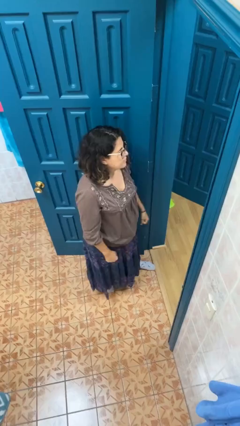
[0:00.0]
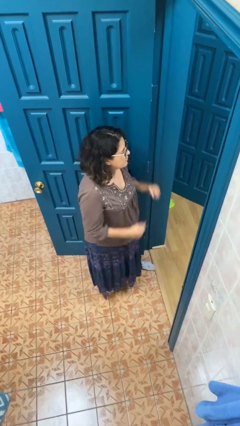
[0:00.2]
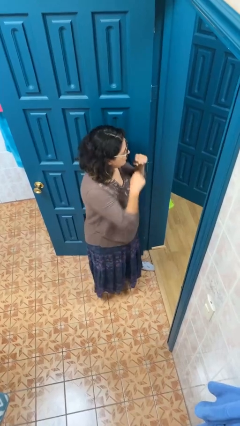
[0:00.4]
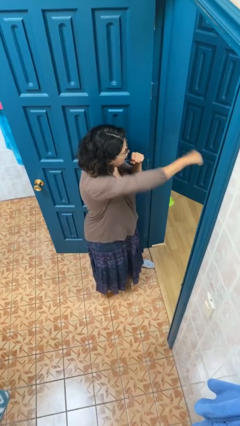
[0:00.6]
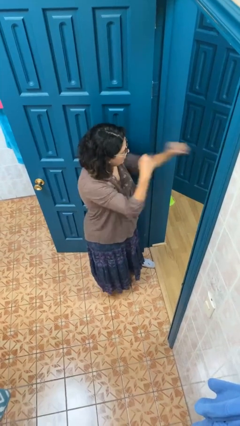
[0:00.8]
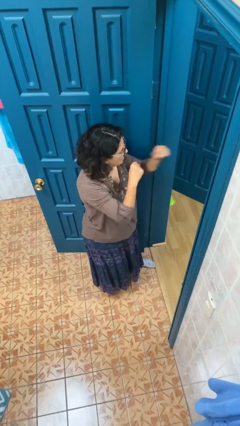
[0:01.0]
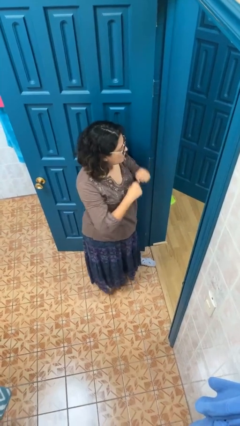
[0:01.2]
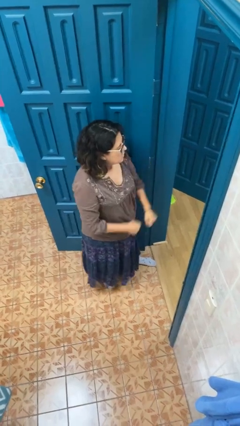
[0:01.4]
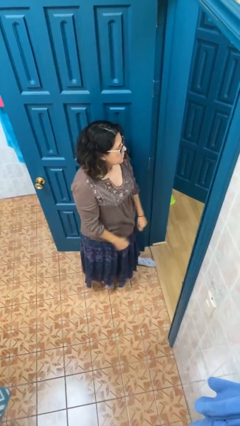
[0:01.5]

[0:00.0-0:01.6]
person punches

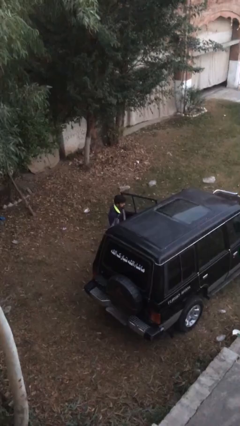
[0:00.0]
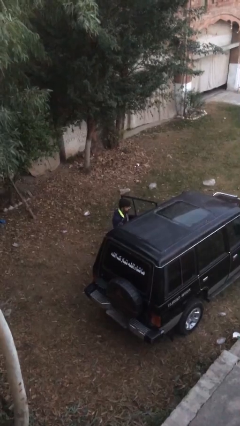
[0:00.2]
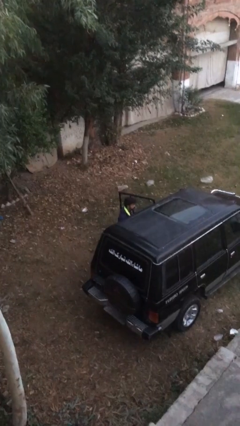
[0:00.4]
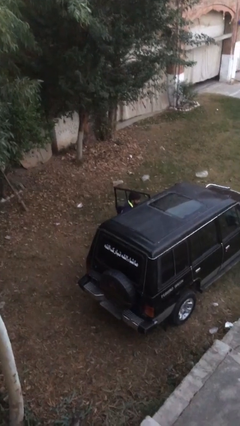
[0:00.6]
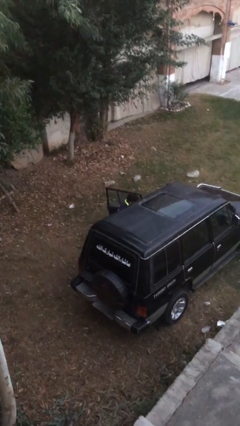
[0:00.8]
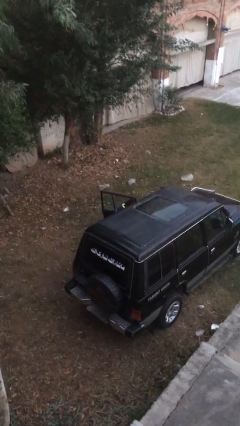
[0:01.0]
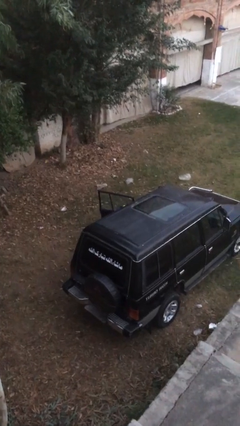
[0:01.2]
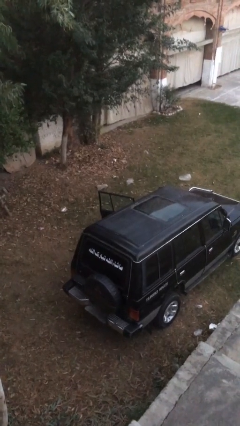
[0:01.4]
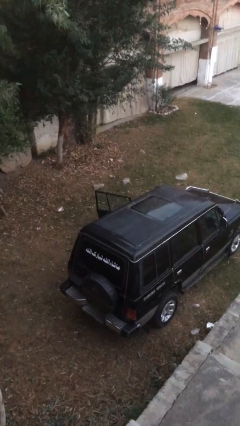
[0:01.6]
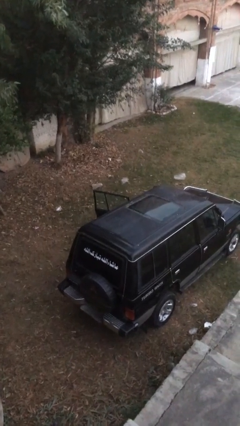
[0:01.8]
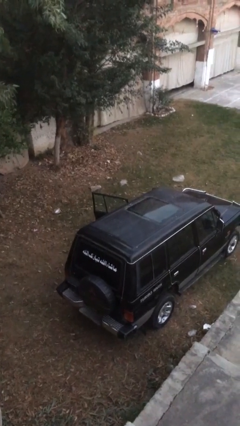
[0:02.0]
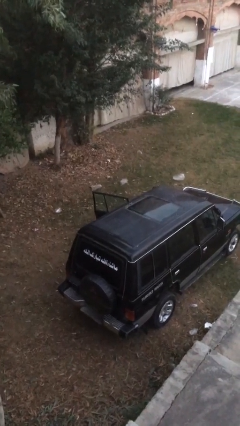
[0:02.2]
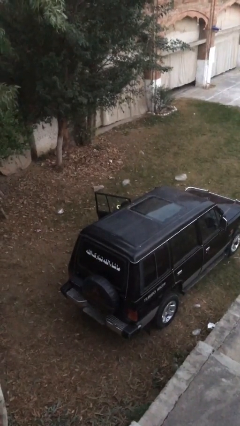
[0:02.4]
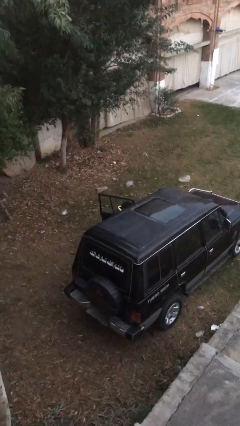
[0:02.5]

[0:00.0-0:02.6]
person enters car

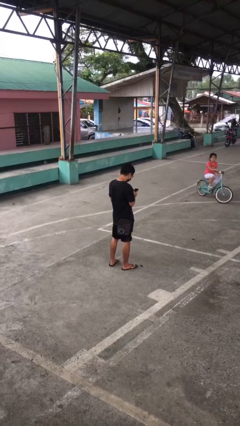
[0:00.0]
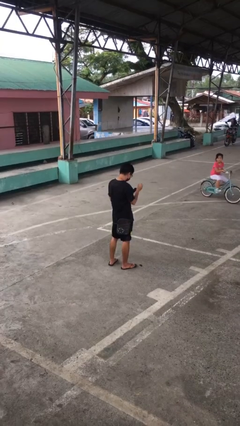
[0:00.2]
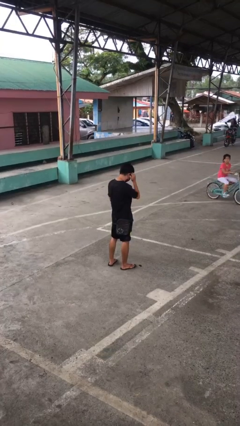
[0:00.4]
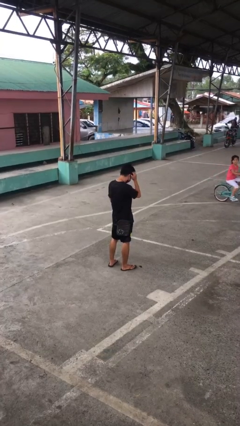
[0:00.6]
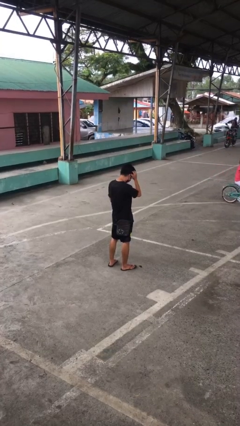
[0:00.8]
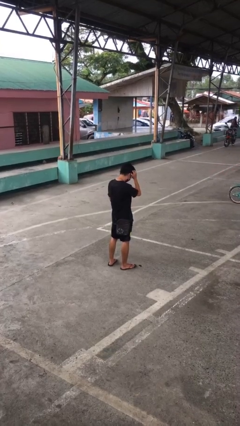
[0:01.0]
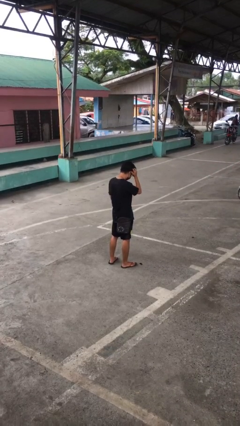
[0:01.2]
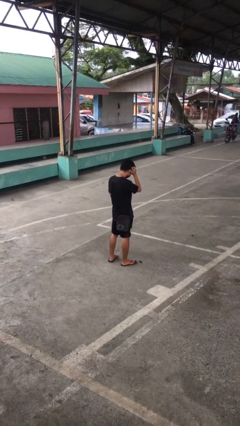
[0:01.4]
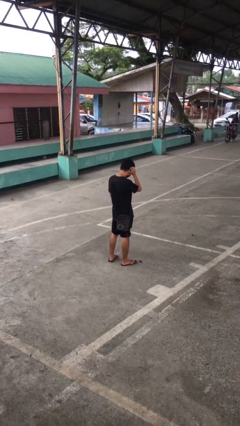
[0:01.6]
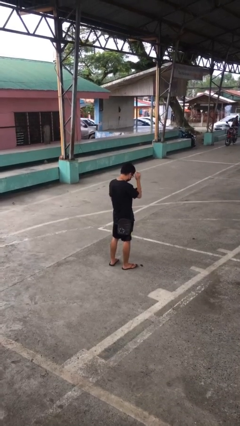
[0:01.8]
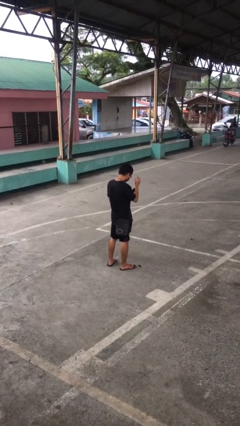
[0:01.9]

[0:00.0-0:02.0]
person scratches face

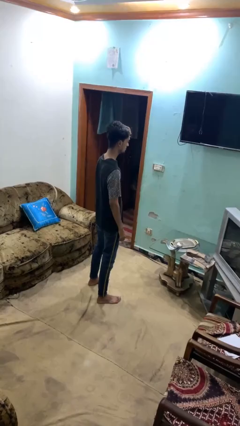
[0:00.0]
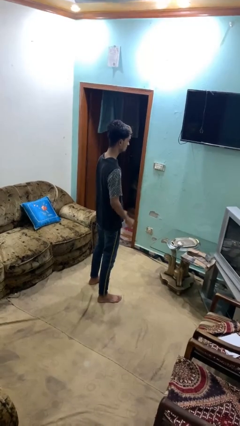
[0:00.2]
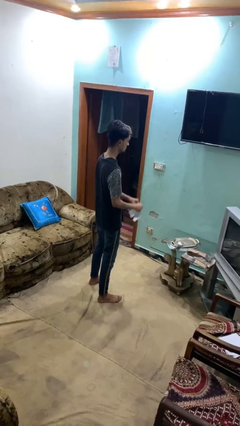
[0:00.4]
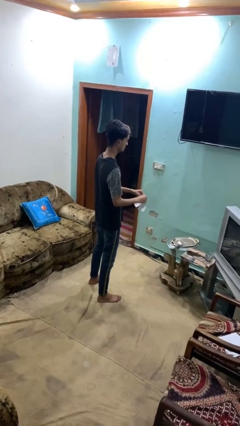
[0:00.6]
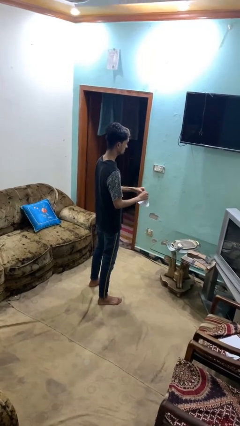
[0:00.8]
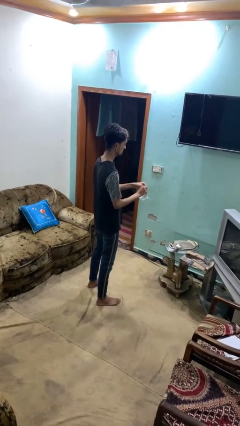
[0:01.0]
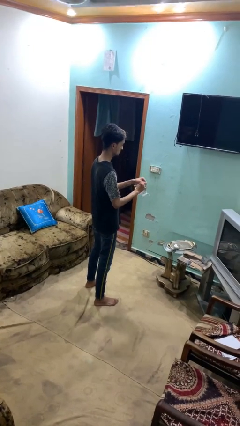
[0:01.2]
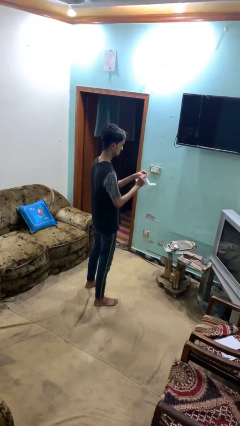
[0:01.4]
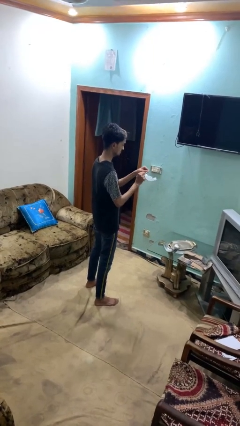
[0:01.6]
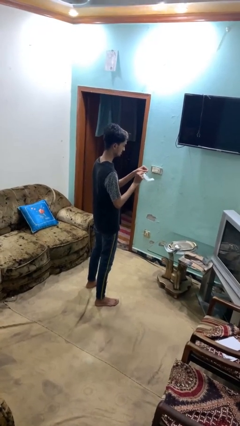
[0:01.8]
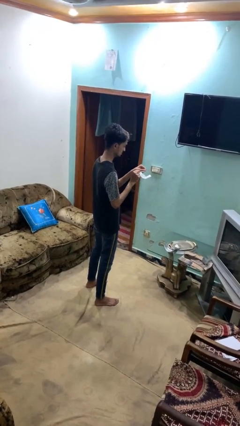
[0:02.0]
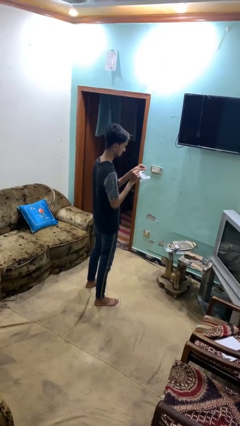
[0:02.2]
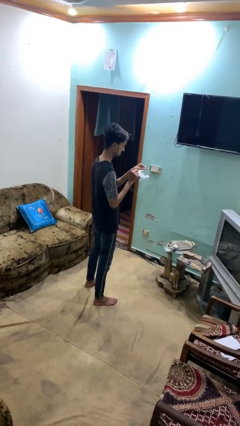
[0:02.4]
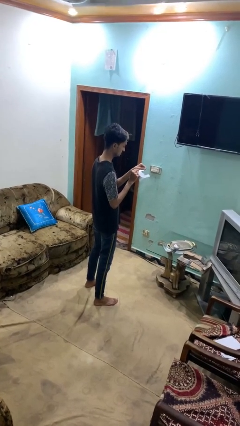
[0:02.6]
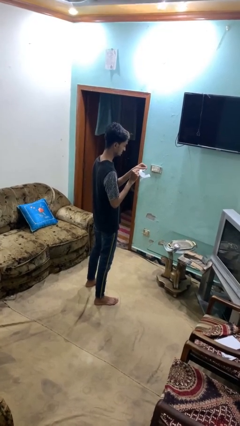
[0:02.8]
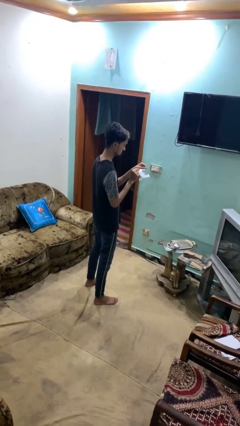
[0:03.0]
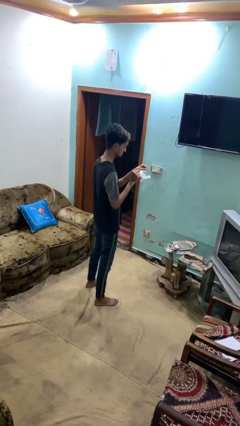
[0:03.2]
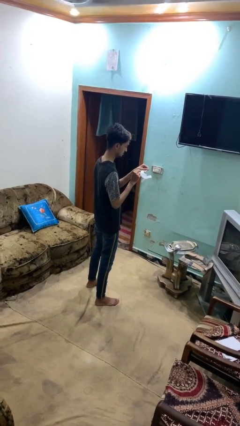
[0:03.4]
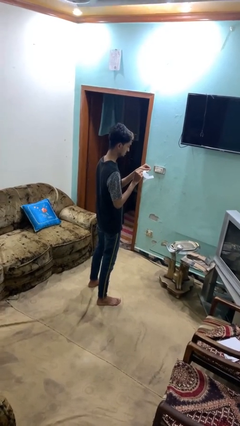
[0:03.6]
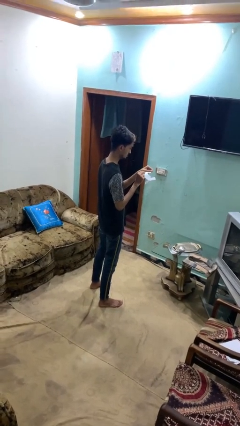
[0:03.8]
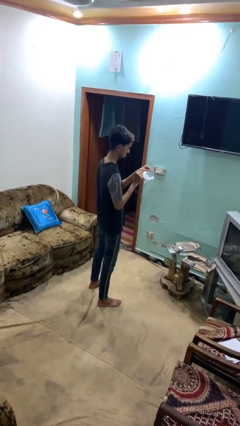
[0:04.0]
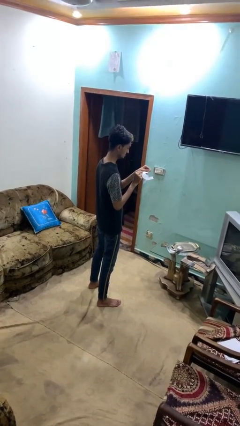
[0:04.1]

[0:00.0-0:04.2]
person tears paper

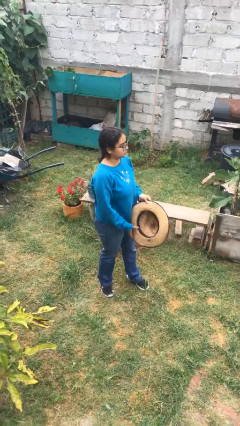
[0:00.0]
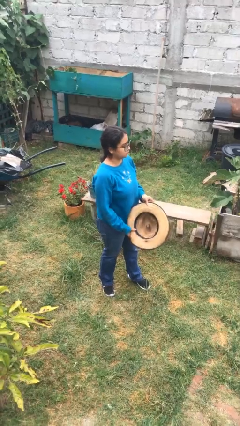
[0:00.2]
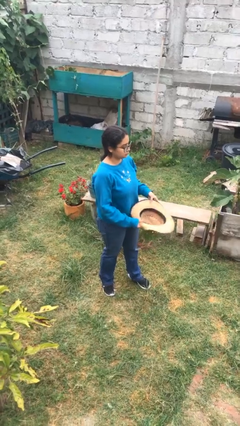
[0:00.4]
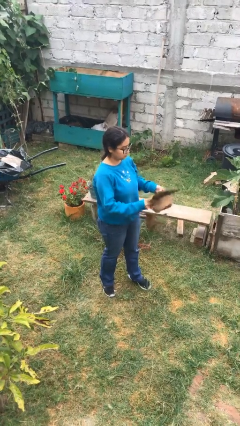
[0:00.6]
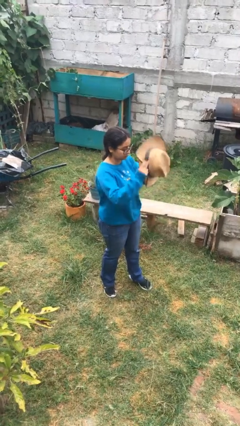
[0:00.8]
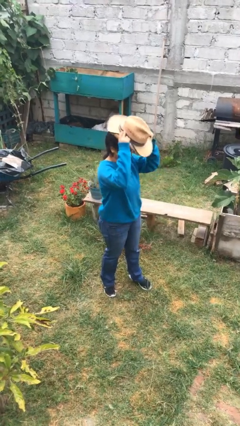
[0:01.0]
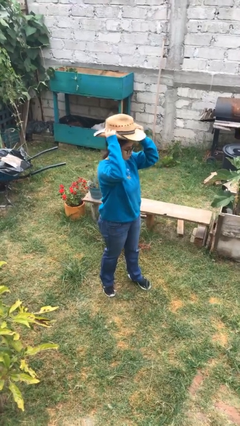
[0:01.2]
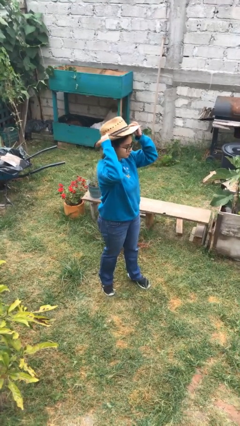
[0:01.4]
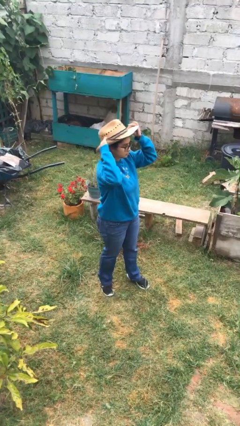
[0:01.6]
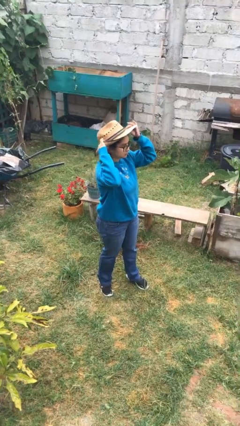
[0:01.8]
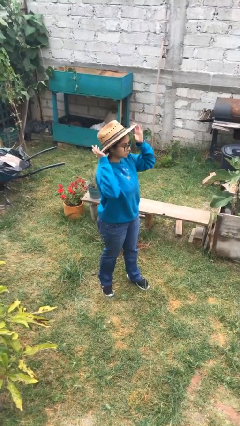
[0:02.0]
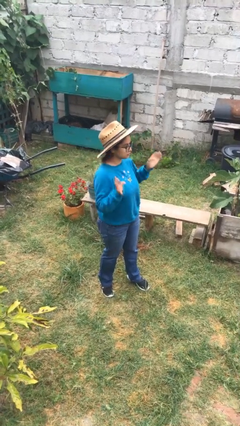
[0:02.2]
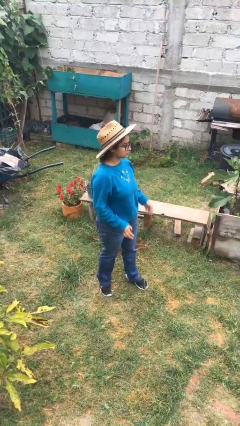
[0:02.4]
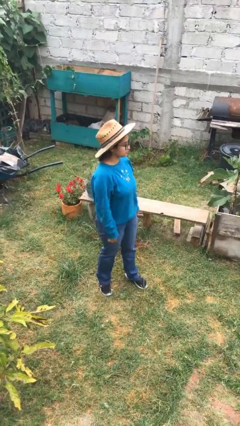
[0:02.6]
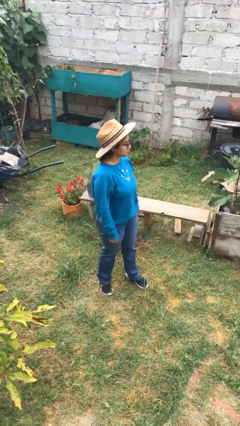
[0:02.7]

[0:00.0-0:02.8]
person puts on hat

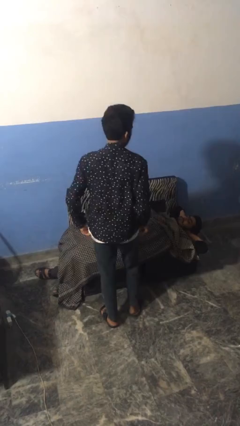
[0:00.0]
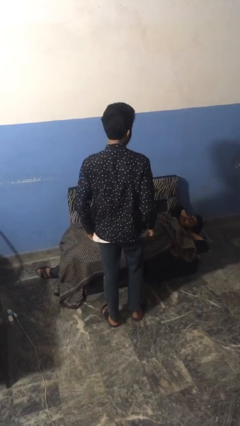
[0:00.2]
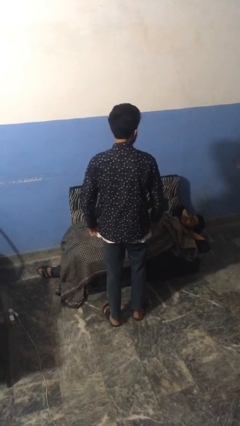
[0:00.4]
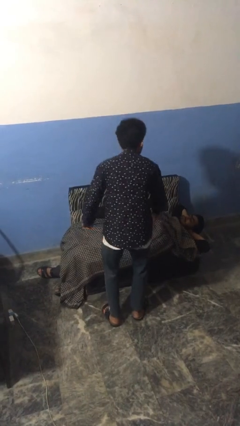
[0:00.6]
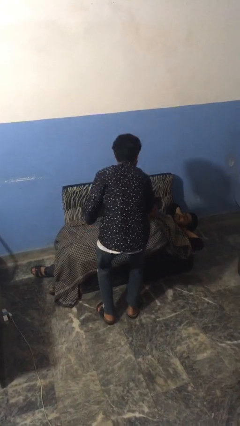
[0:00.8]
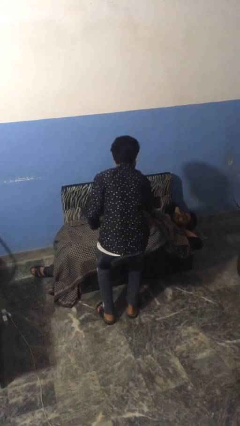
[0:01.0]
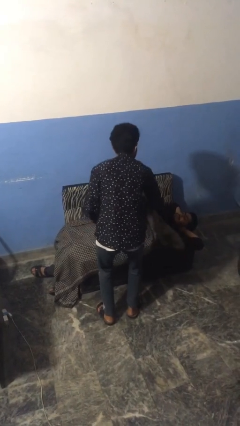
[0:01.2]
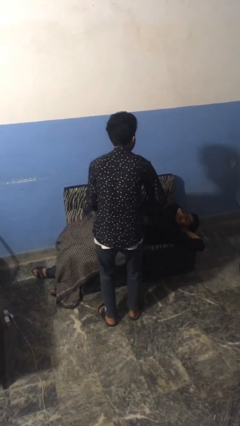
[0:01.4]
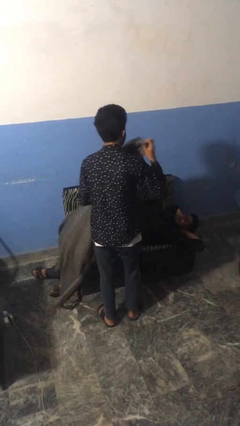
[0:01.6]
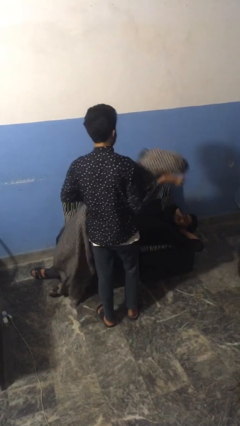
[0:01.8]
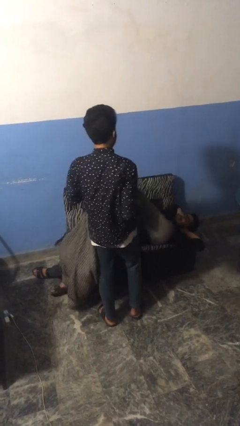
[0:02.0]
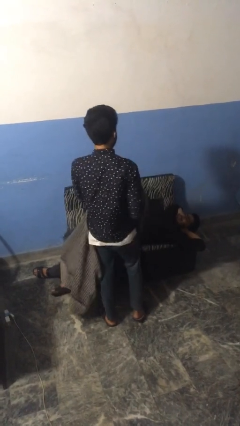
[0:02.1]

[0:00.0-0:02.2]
person uncovers friend with blanket

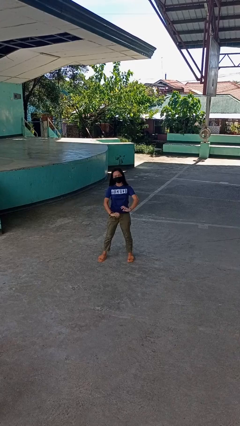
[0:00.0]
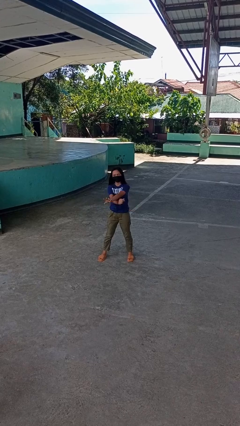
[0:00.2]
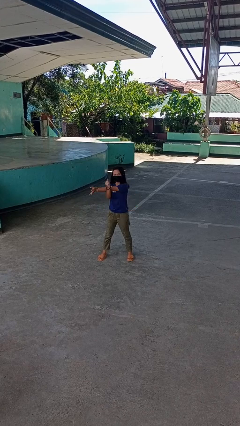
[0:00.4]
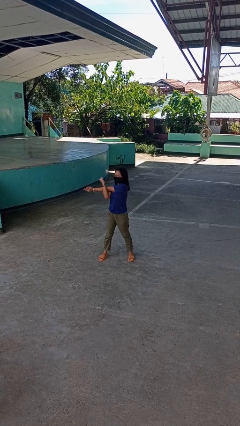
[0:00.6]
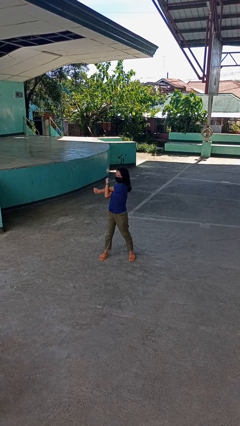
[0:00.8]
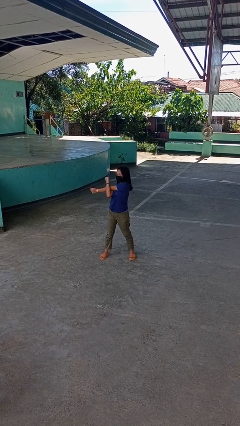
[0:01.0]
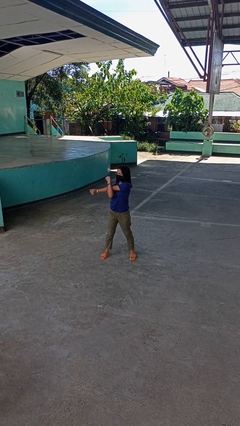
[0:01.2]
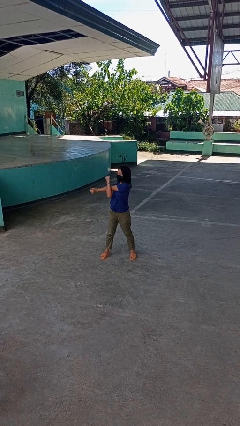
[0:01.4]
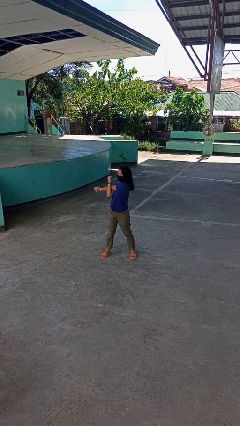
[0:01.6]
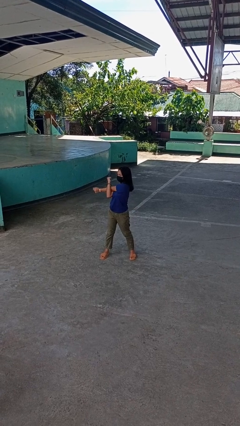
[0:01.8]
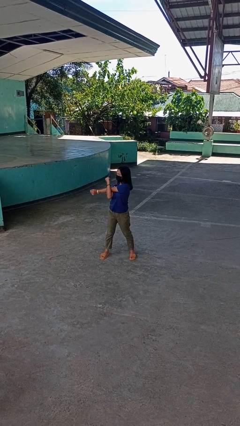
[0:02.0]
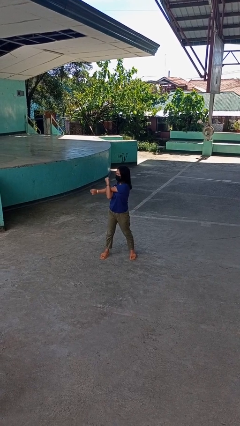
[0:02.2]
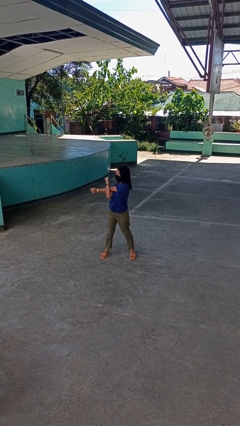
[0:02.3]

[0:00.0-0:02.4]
person stretches arms to side
